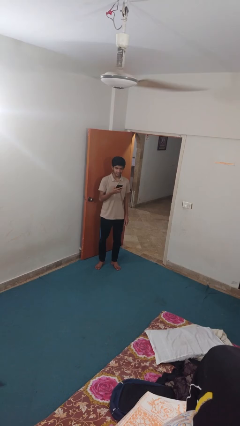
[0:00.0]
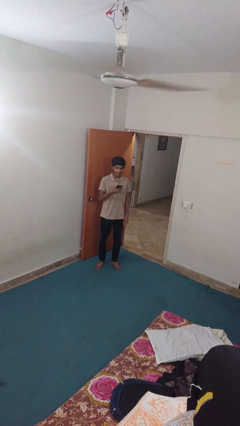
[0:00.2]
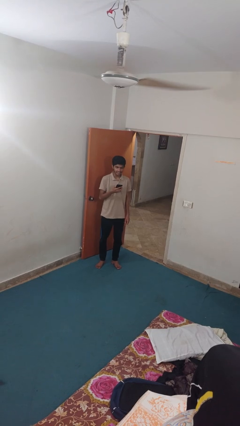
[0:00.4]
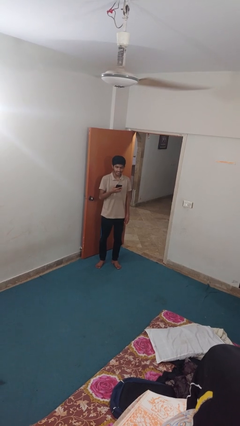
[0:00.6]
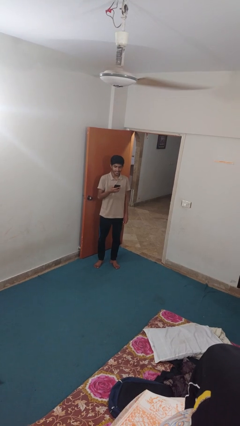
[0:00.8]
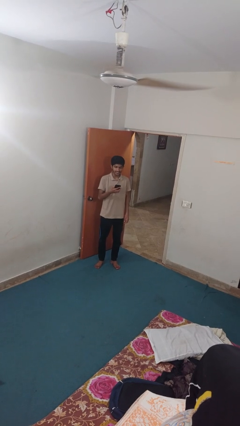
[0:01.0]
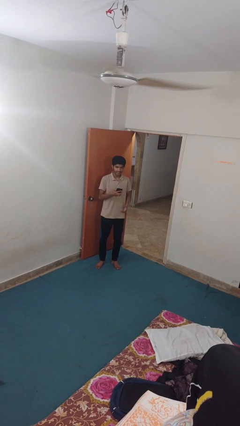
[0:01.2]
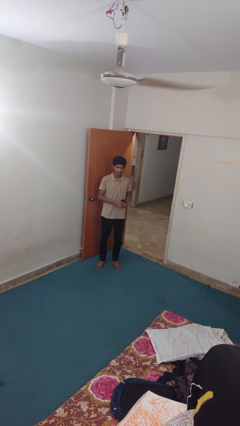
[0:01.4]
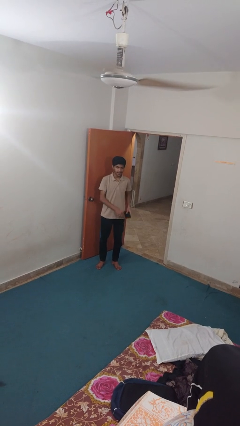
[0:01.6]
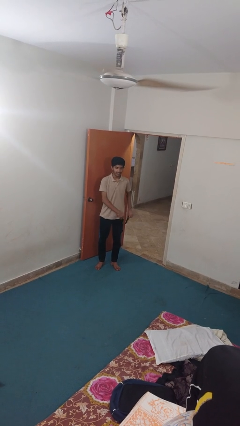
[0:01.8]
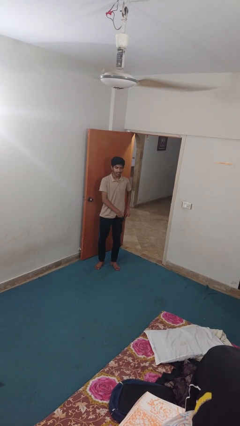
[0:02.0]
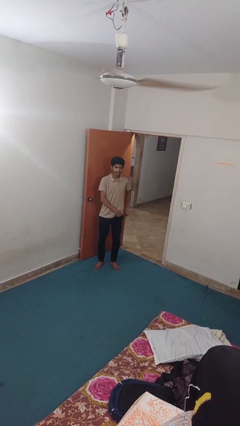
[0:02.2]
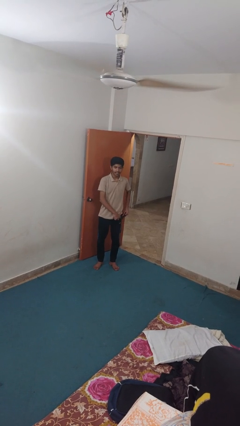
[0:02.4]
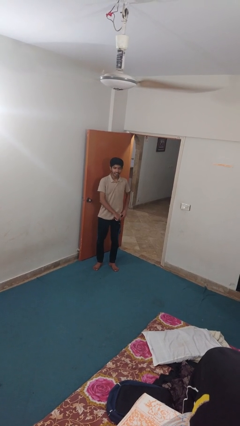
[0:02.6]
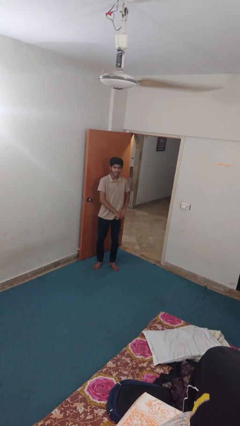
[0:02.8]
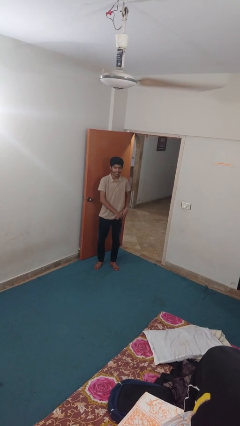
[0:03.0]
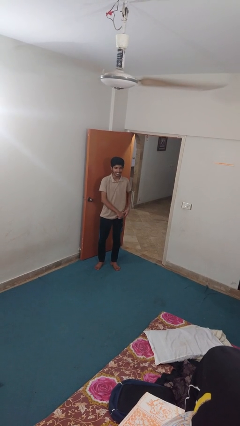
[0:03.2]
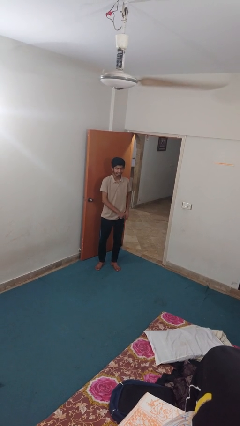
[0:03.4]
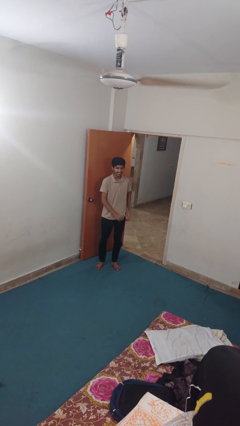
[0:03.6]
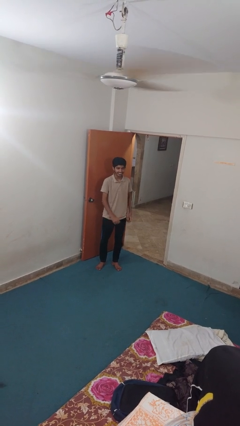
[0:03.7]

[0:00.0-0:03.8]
person puts phone into pocket

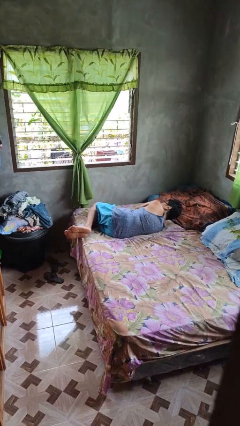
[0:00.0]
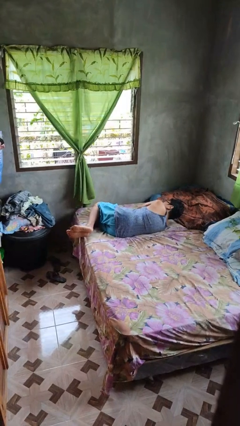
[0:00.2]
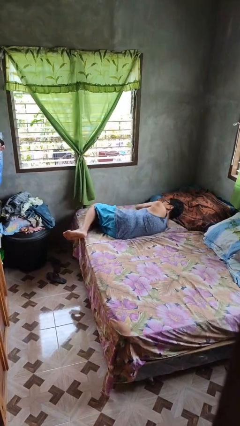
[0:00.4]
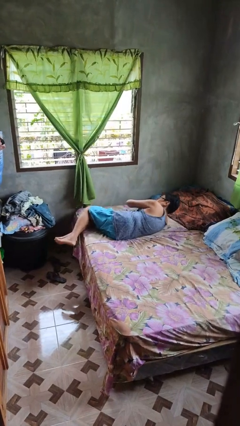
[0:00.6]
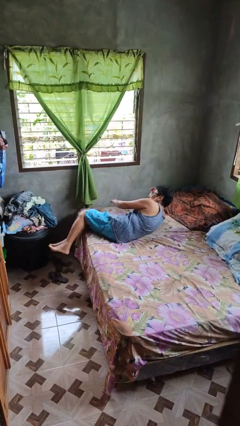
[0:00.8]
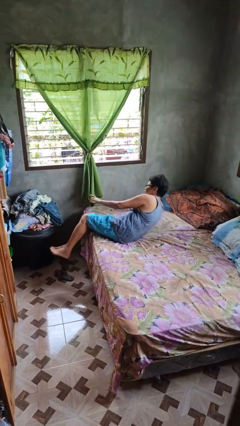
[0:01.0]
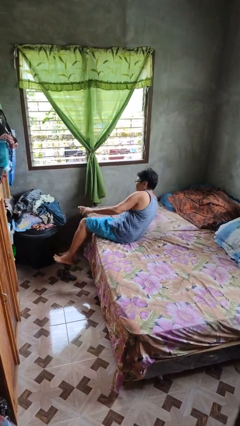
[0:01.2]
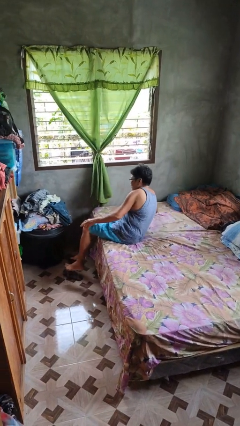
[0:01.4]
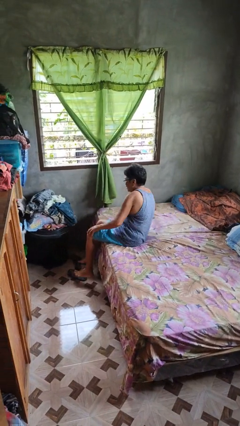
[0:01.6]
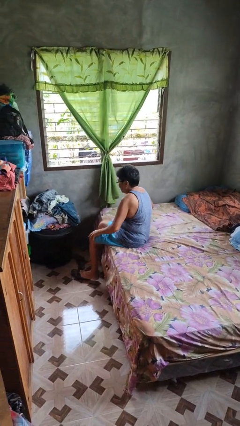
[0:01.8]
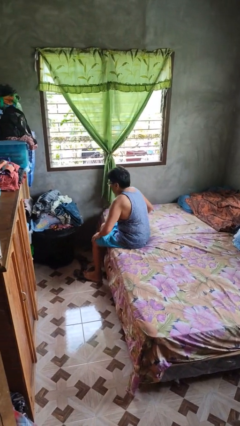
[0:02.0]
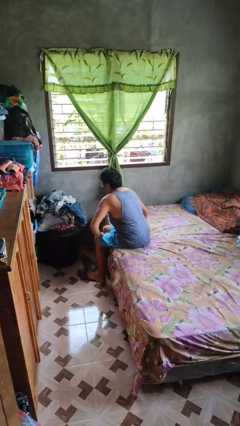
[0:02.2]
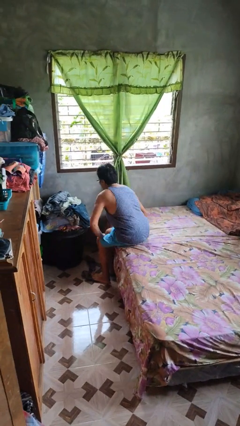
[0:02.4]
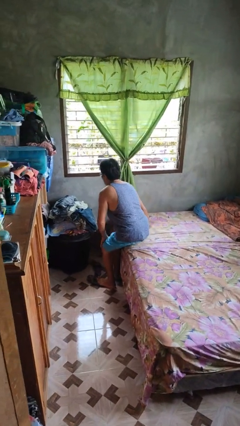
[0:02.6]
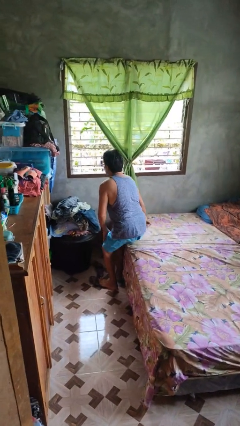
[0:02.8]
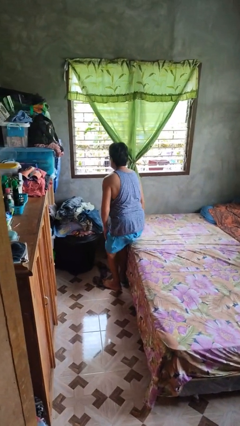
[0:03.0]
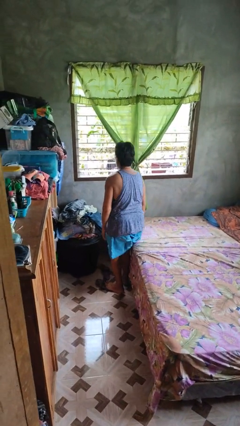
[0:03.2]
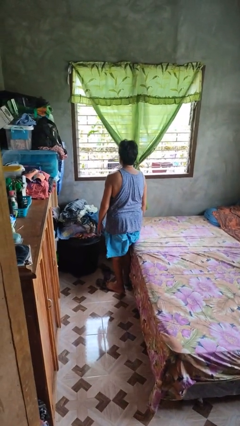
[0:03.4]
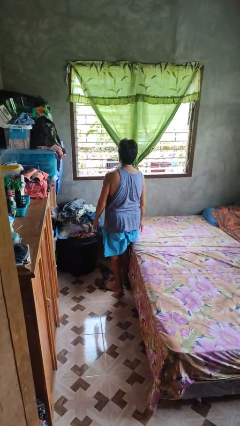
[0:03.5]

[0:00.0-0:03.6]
person stands up

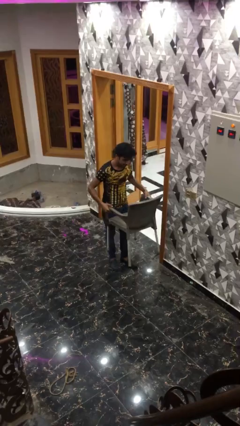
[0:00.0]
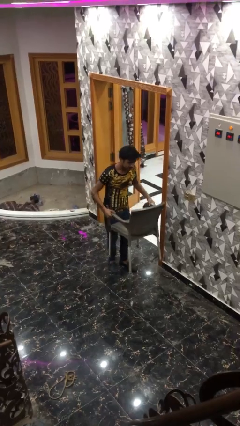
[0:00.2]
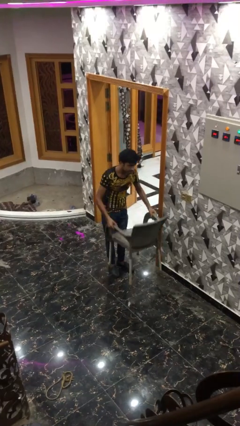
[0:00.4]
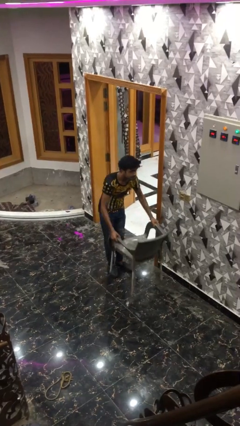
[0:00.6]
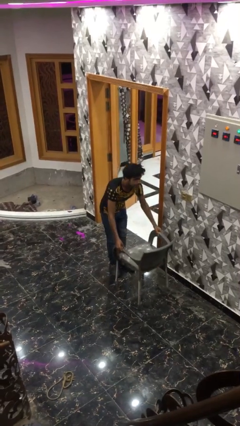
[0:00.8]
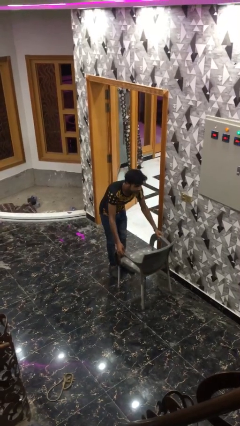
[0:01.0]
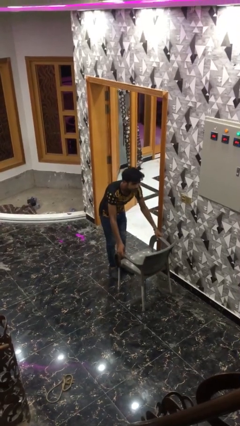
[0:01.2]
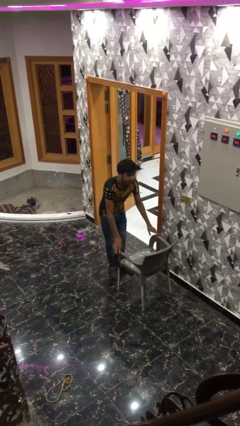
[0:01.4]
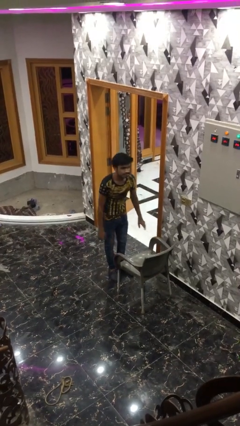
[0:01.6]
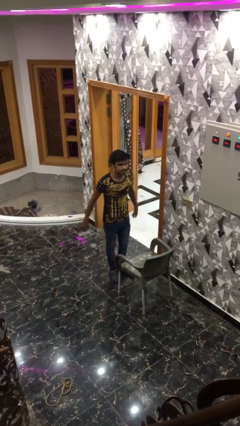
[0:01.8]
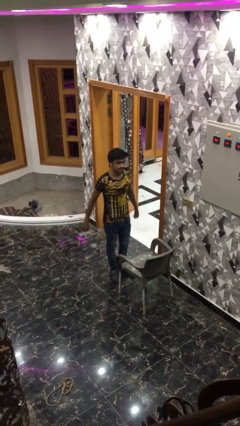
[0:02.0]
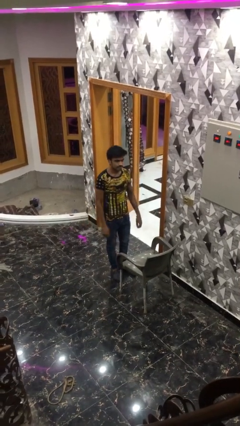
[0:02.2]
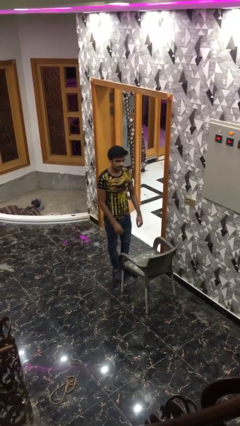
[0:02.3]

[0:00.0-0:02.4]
person puts down object on floor

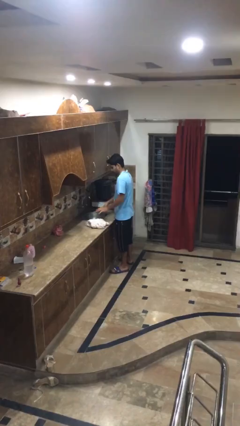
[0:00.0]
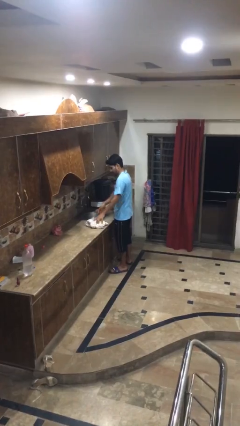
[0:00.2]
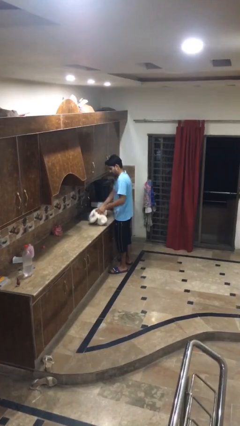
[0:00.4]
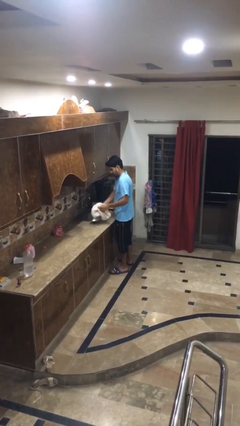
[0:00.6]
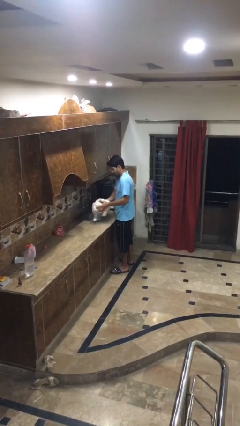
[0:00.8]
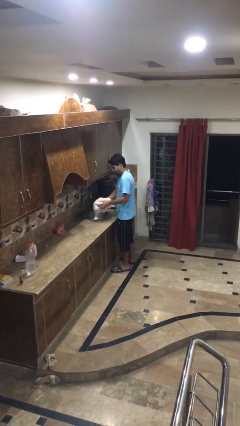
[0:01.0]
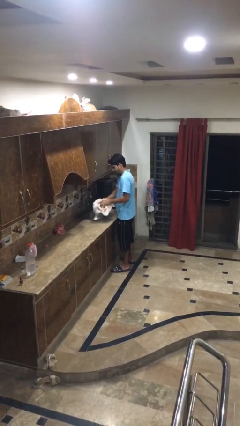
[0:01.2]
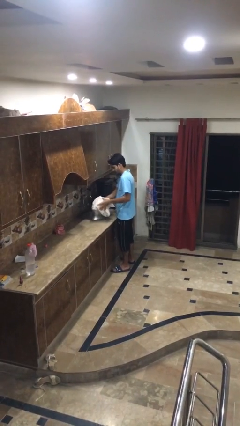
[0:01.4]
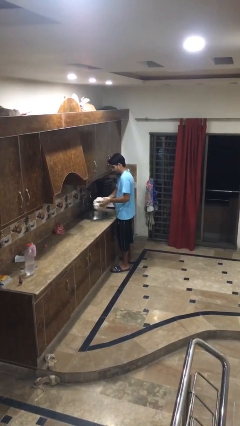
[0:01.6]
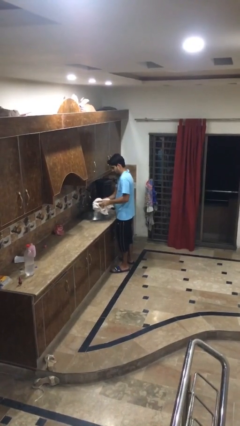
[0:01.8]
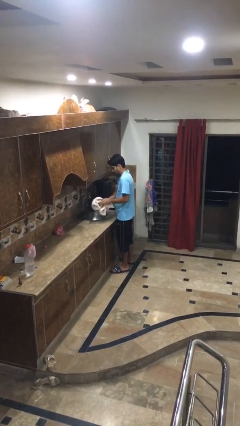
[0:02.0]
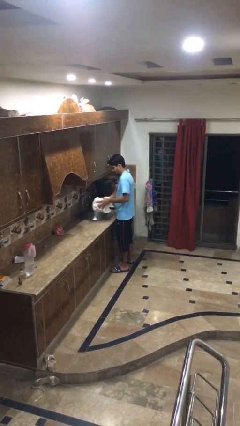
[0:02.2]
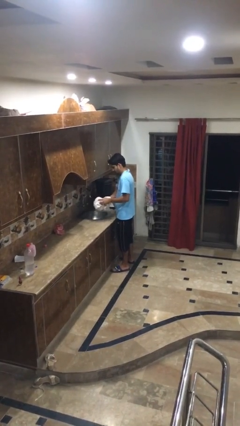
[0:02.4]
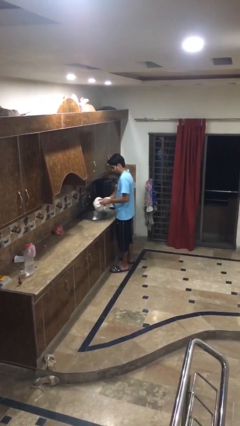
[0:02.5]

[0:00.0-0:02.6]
person dries hands with towel

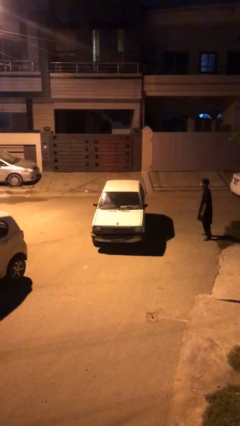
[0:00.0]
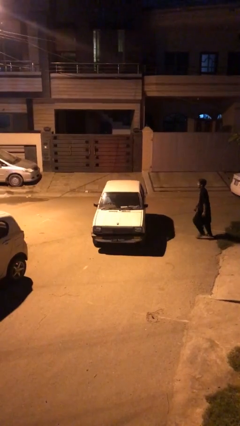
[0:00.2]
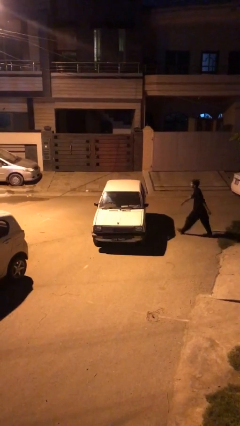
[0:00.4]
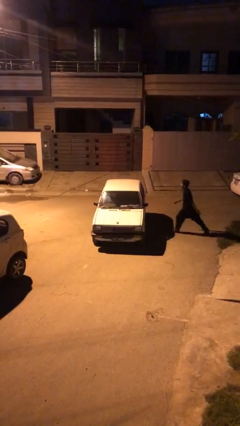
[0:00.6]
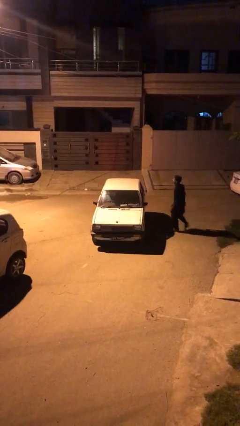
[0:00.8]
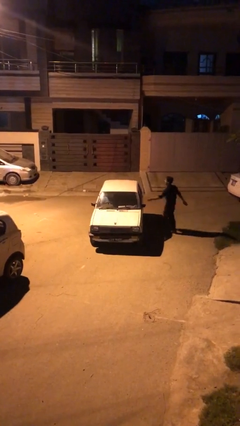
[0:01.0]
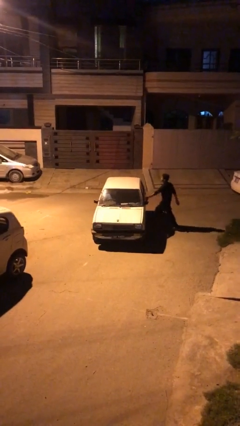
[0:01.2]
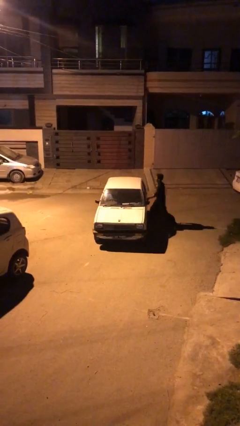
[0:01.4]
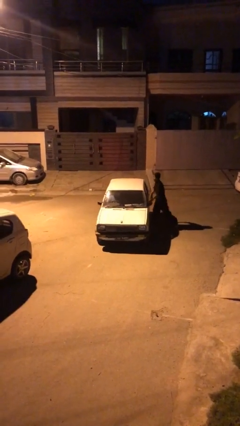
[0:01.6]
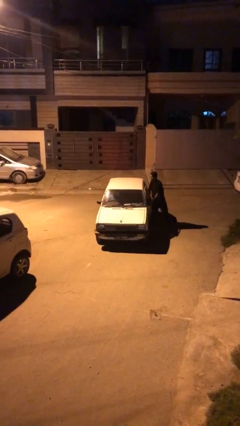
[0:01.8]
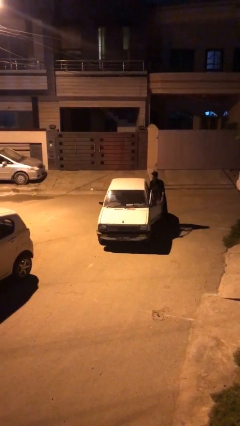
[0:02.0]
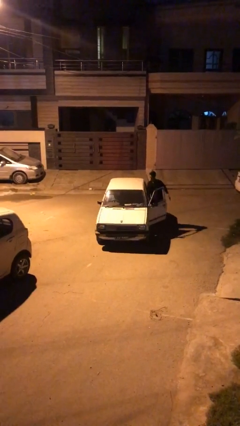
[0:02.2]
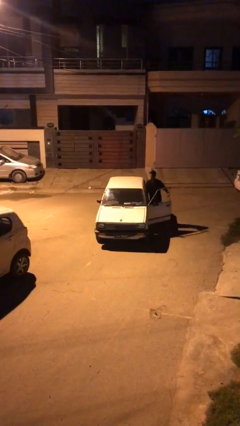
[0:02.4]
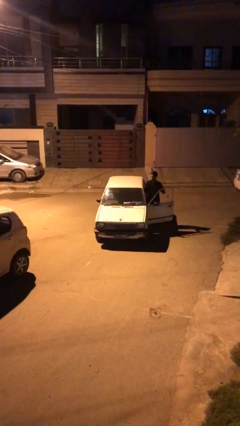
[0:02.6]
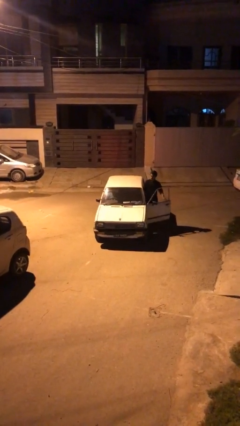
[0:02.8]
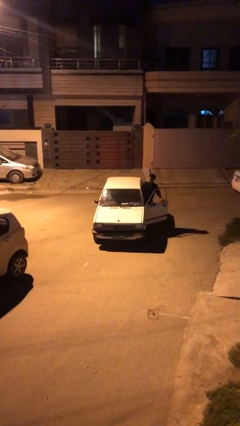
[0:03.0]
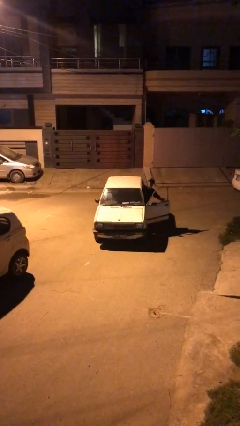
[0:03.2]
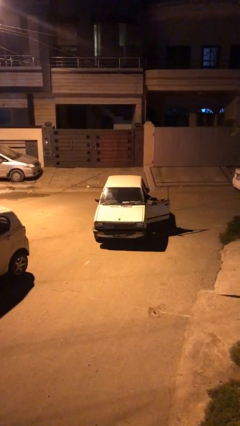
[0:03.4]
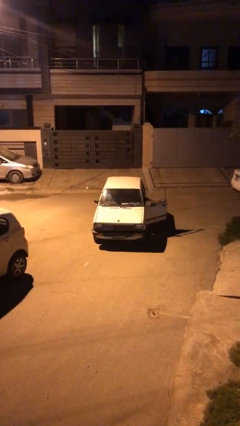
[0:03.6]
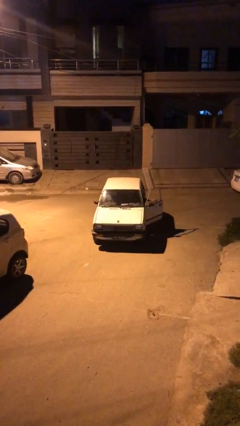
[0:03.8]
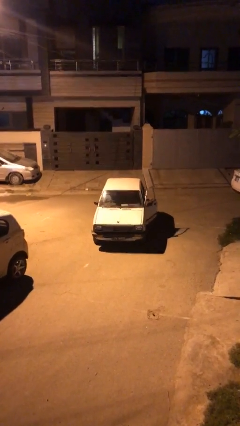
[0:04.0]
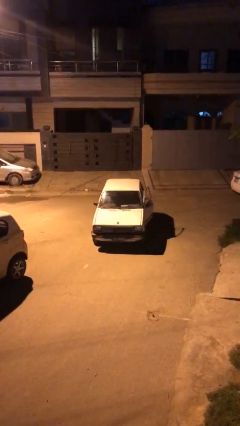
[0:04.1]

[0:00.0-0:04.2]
car picks up person

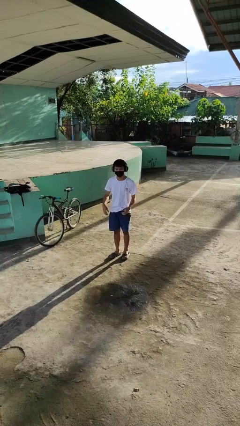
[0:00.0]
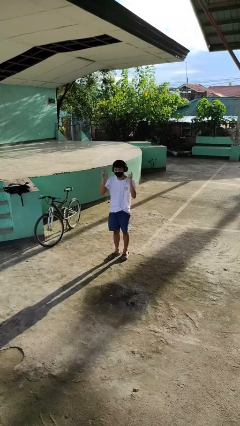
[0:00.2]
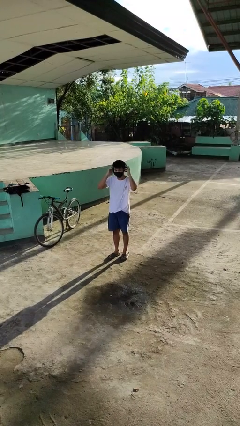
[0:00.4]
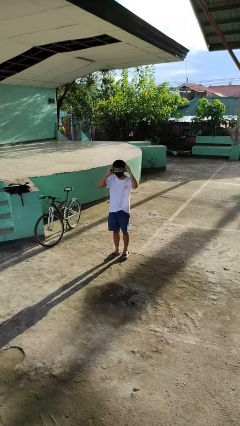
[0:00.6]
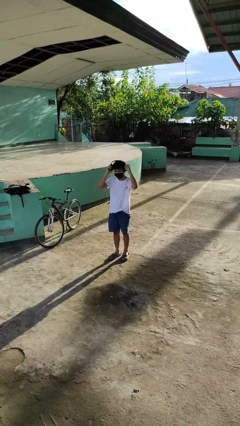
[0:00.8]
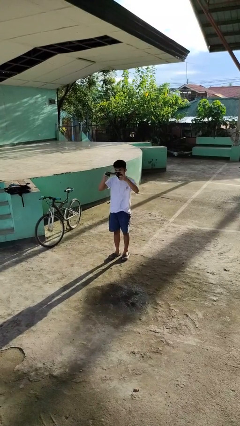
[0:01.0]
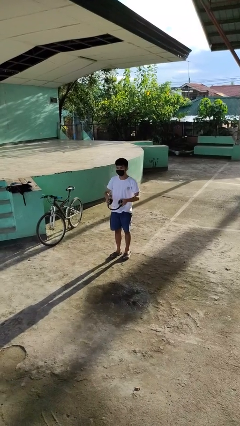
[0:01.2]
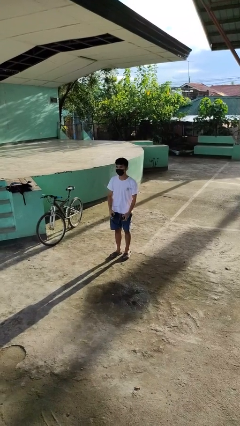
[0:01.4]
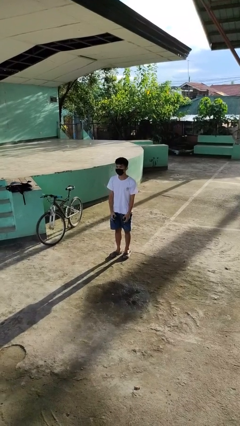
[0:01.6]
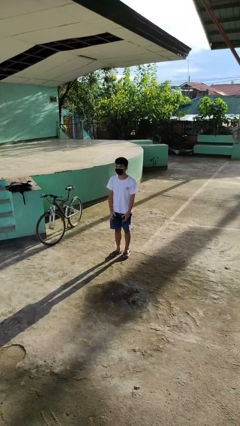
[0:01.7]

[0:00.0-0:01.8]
person takes off headphones
